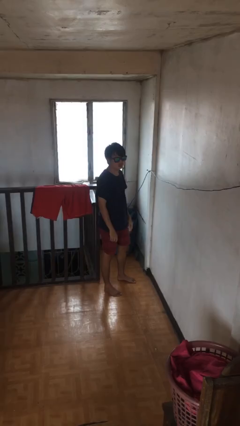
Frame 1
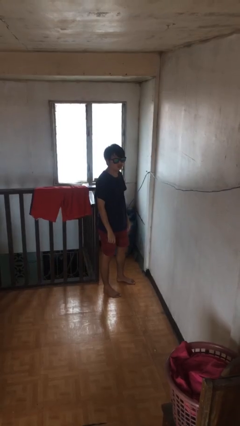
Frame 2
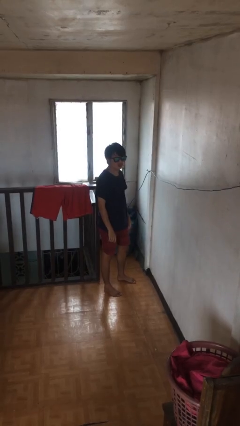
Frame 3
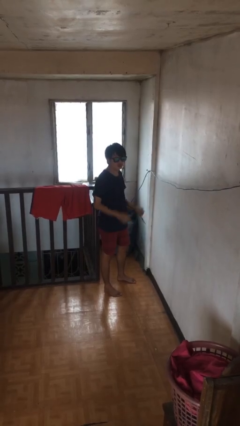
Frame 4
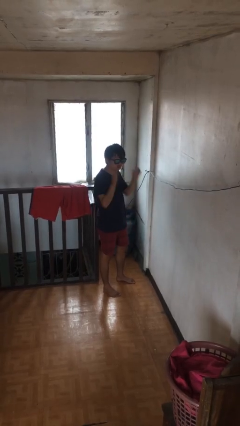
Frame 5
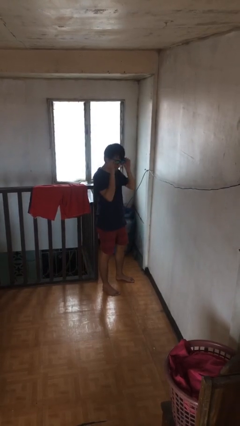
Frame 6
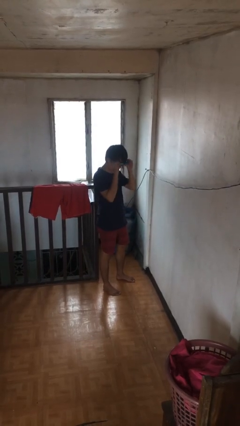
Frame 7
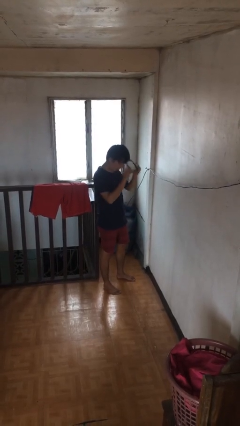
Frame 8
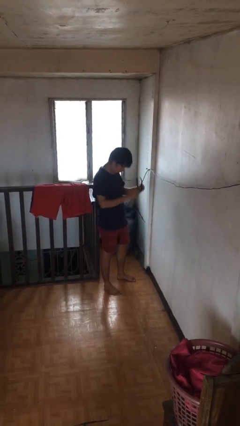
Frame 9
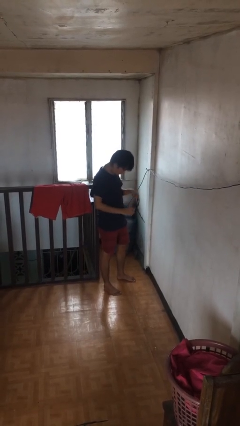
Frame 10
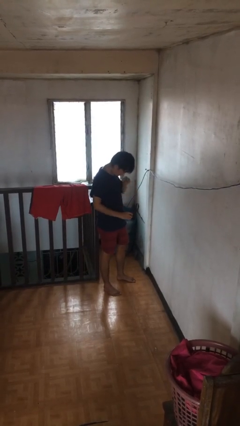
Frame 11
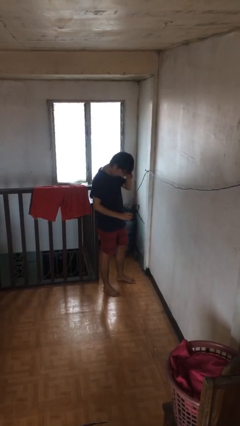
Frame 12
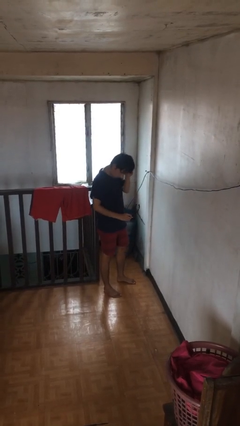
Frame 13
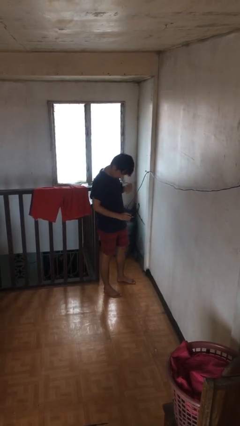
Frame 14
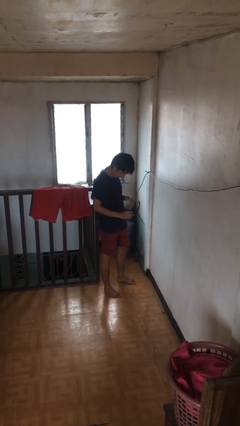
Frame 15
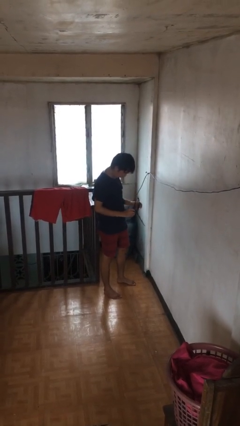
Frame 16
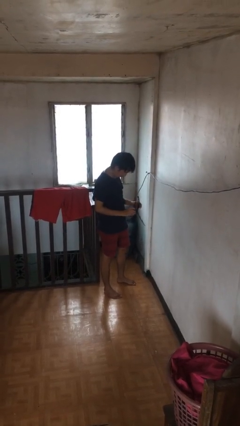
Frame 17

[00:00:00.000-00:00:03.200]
person takes off sunglasses

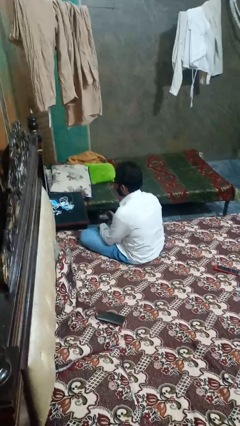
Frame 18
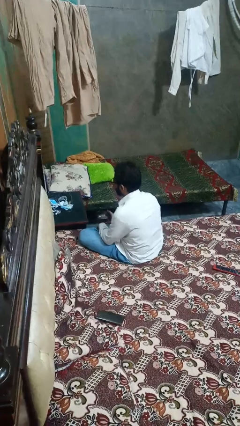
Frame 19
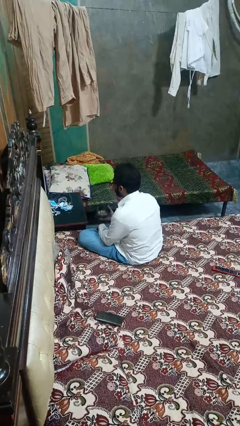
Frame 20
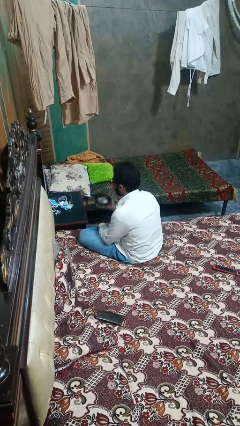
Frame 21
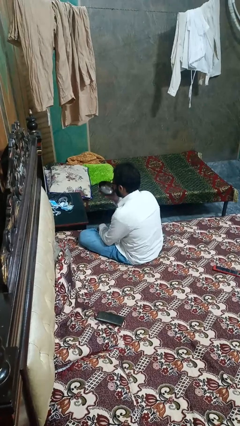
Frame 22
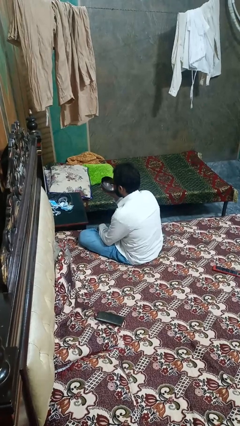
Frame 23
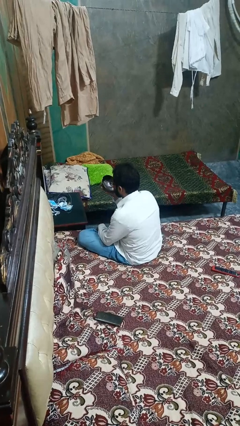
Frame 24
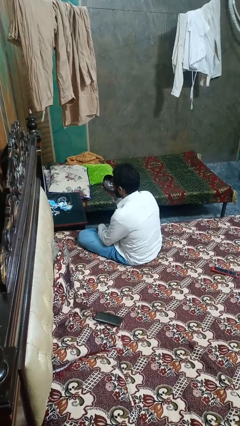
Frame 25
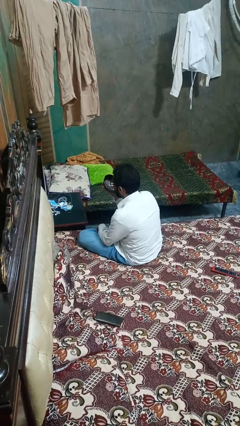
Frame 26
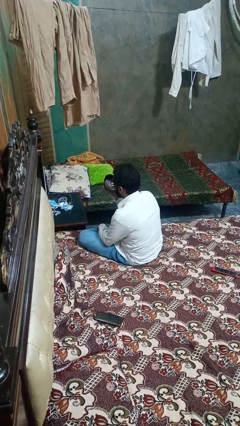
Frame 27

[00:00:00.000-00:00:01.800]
person drinks from shotglass

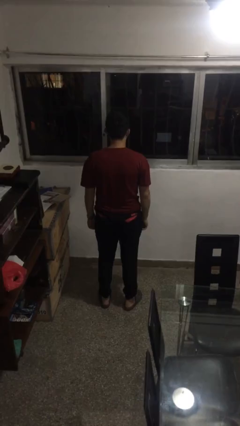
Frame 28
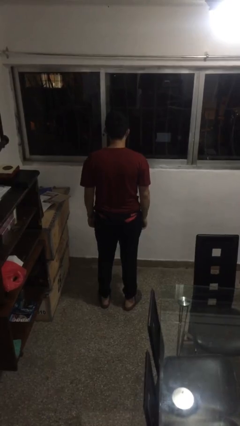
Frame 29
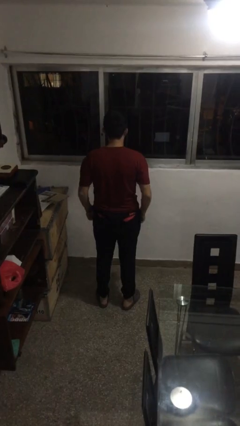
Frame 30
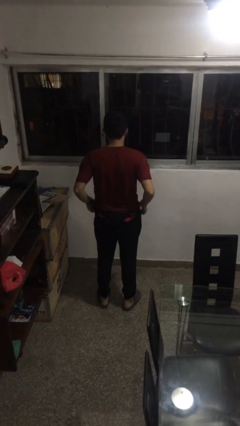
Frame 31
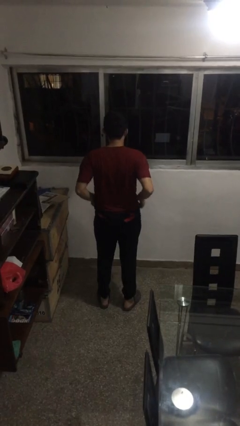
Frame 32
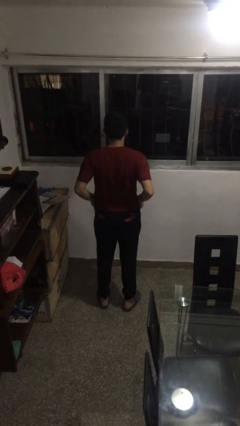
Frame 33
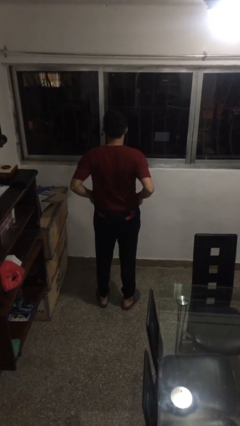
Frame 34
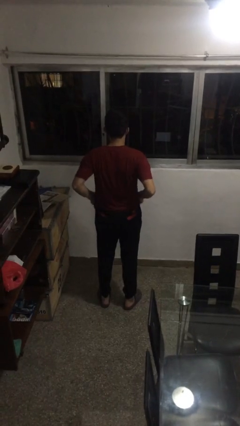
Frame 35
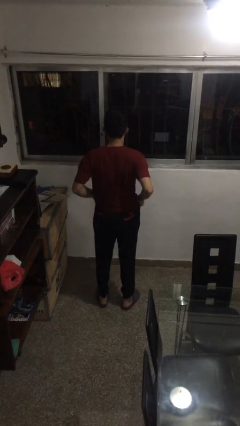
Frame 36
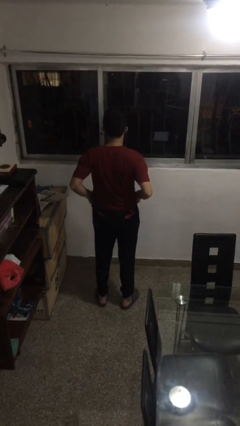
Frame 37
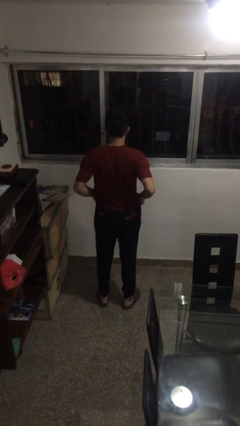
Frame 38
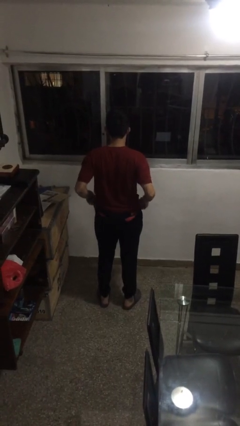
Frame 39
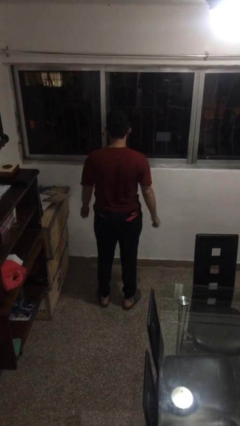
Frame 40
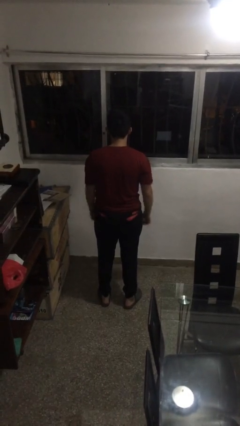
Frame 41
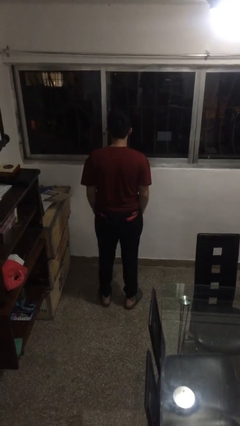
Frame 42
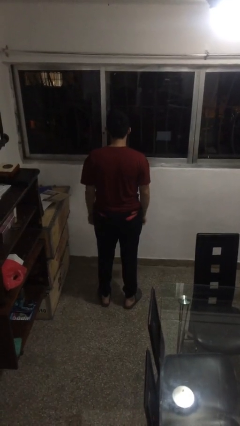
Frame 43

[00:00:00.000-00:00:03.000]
person hikes up pants

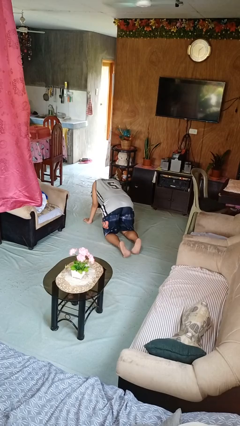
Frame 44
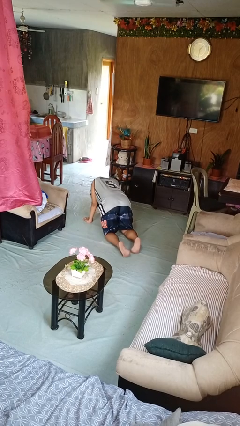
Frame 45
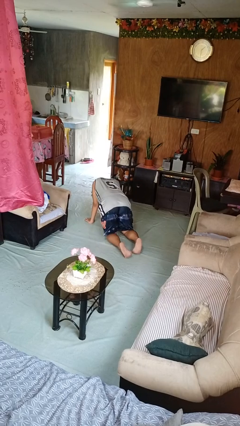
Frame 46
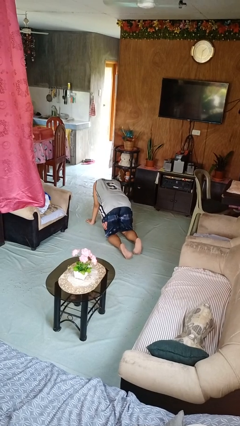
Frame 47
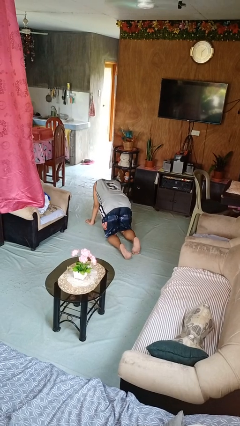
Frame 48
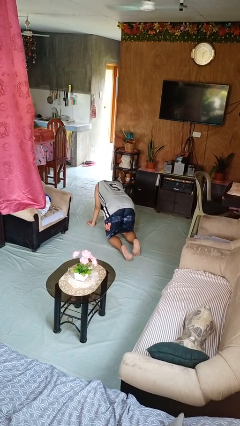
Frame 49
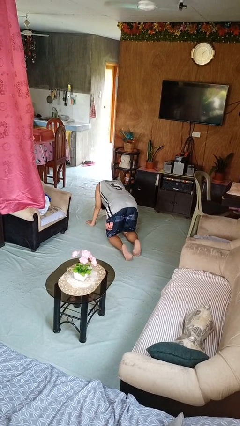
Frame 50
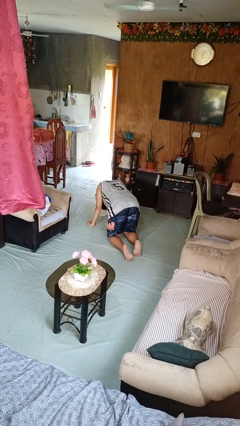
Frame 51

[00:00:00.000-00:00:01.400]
person crawls

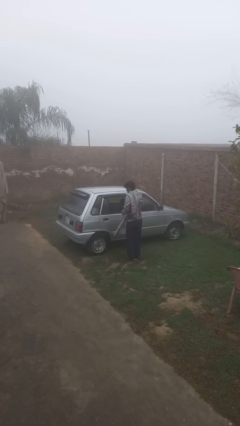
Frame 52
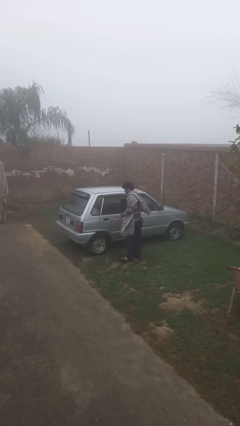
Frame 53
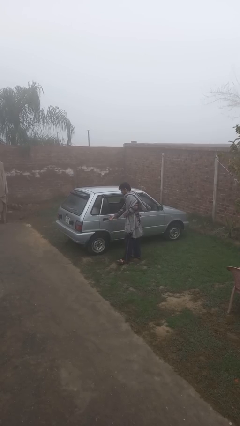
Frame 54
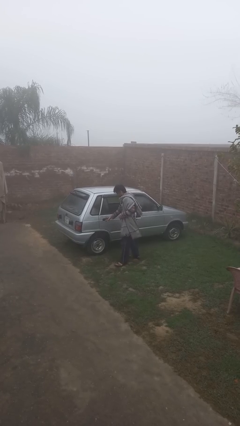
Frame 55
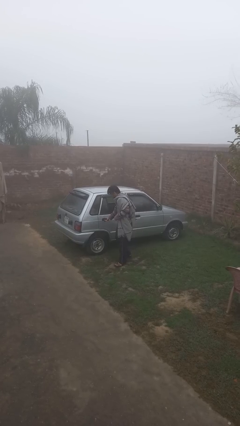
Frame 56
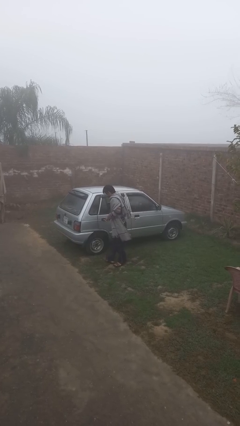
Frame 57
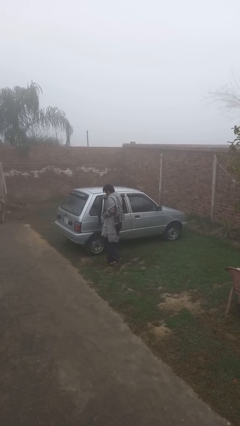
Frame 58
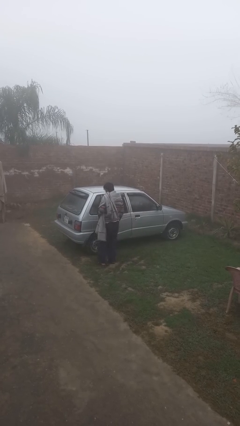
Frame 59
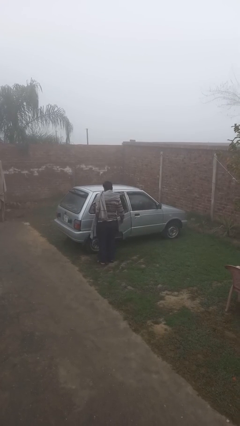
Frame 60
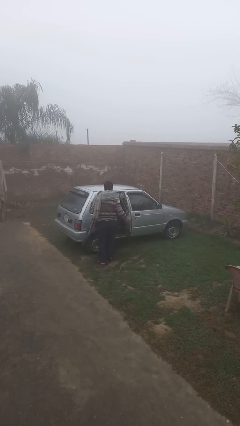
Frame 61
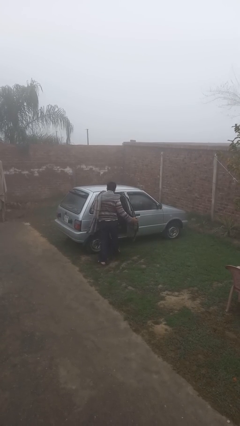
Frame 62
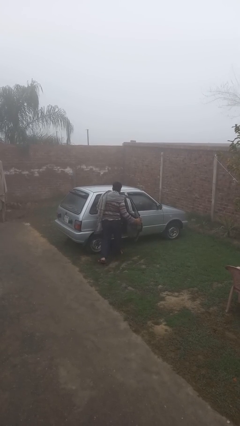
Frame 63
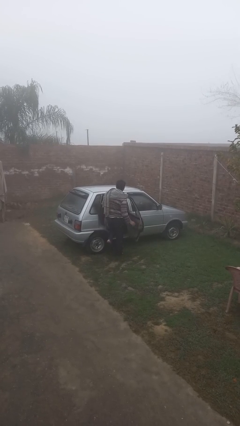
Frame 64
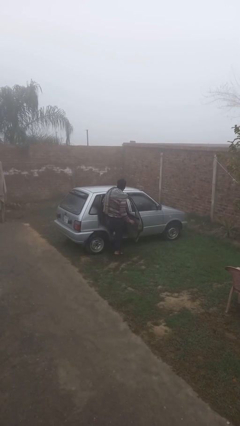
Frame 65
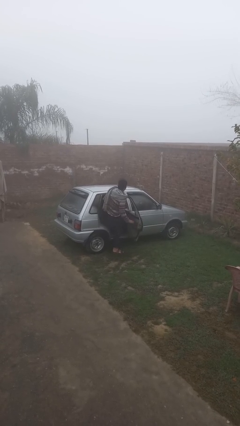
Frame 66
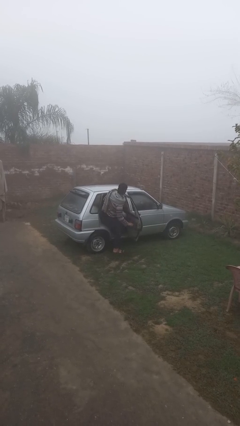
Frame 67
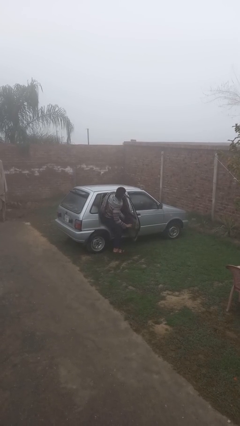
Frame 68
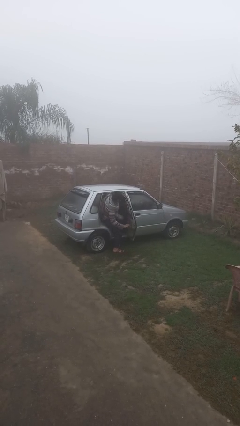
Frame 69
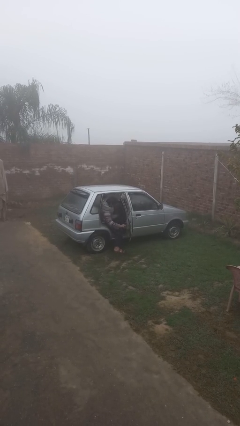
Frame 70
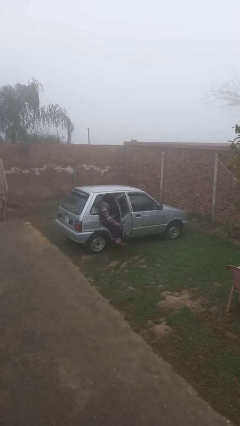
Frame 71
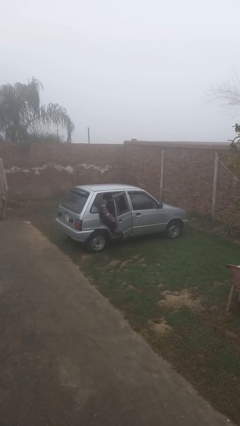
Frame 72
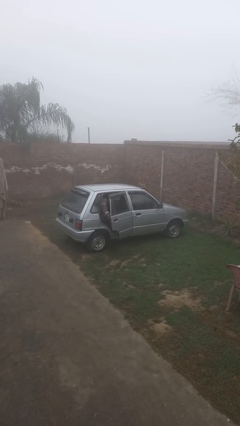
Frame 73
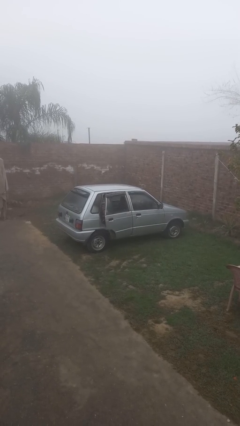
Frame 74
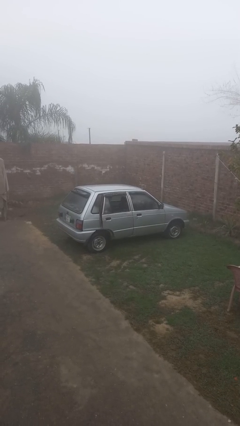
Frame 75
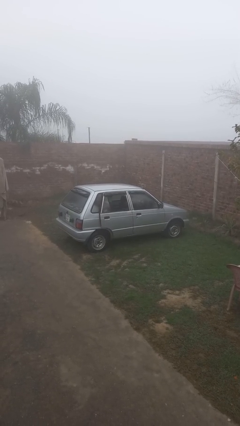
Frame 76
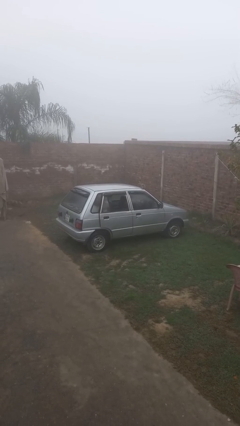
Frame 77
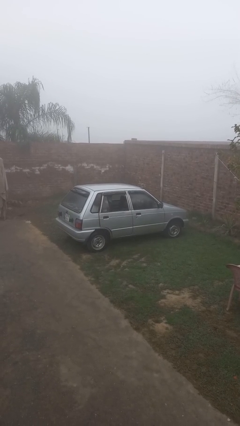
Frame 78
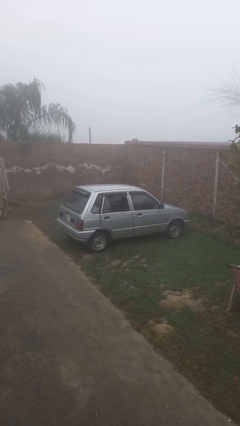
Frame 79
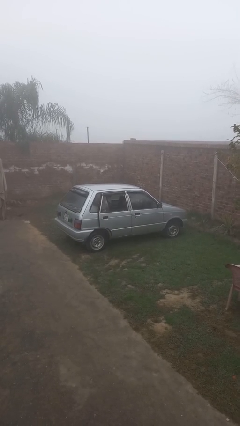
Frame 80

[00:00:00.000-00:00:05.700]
car picks up person

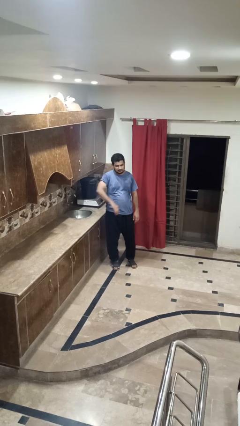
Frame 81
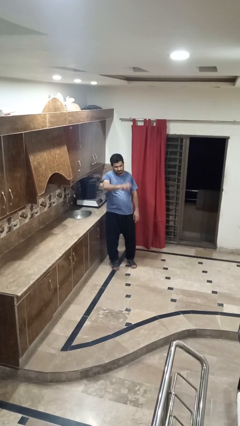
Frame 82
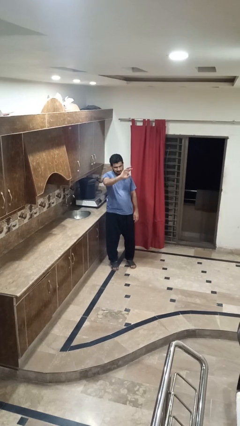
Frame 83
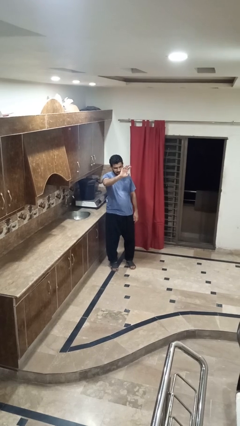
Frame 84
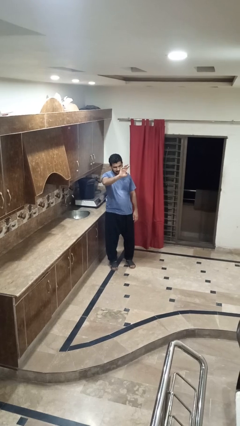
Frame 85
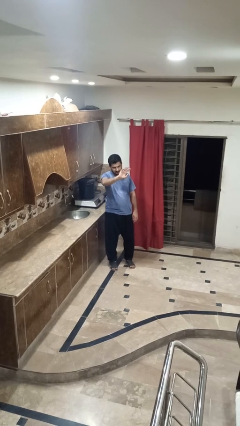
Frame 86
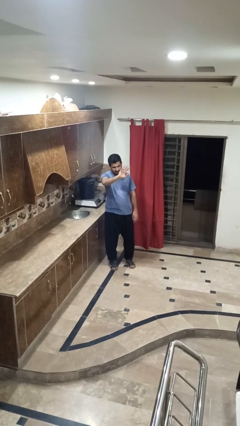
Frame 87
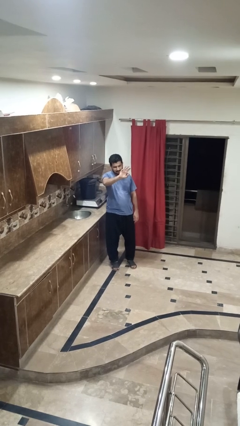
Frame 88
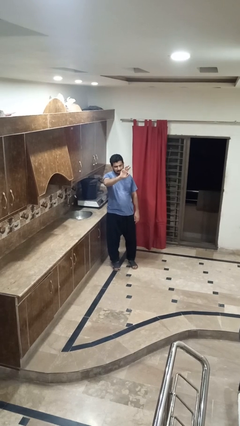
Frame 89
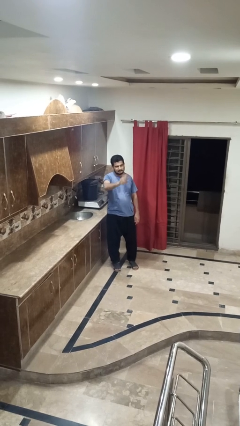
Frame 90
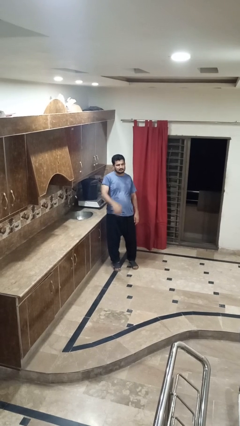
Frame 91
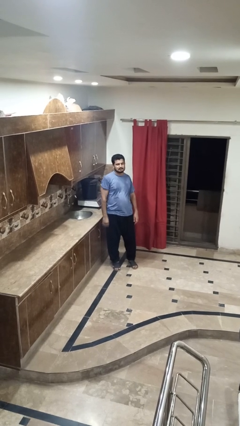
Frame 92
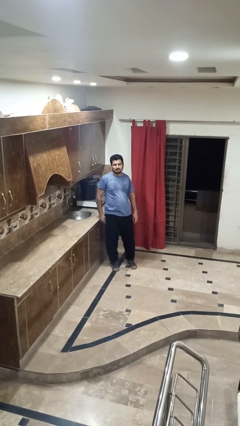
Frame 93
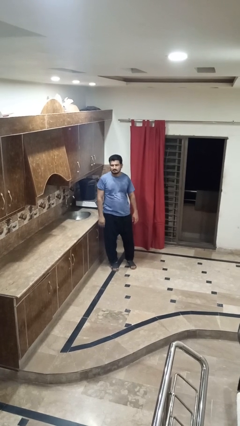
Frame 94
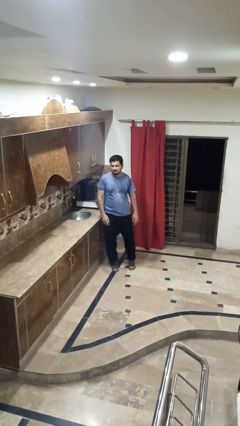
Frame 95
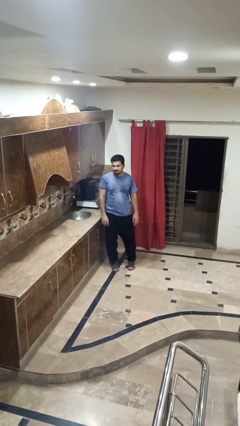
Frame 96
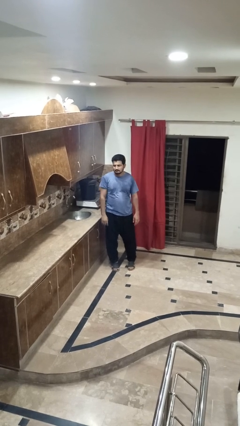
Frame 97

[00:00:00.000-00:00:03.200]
person waves at person
